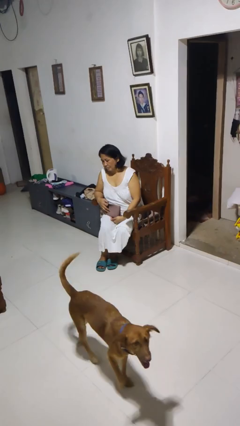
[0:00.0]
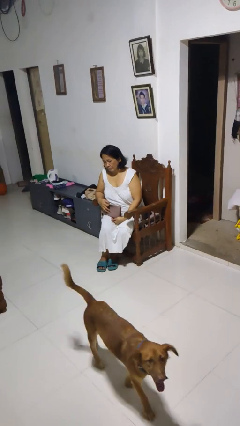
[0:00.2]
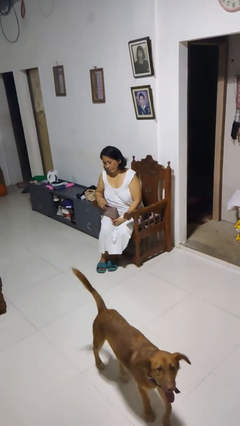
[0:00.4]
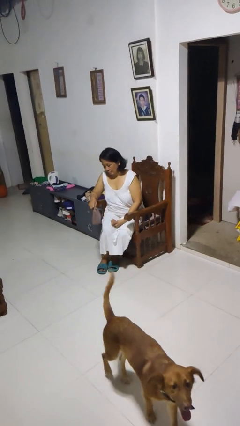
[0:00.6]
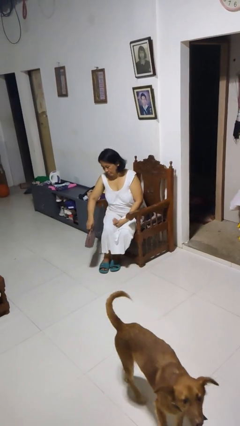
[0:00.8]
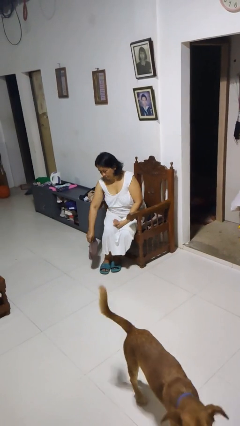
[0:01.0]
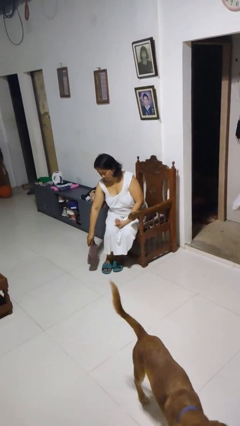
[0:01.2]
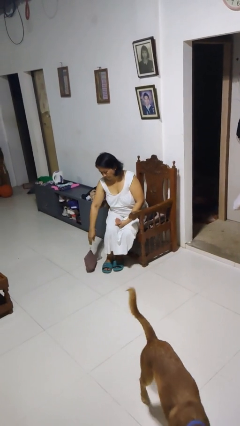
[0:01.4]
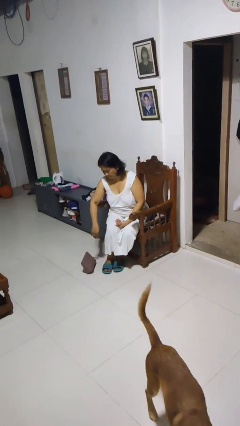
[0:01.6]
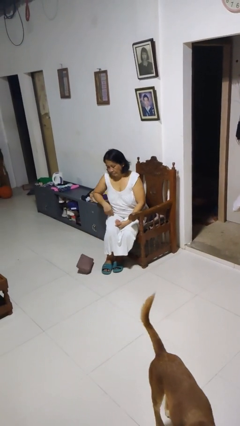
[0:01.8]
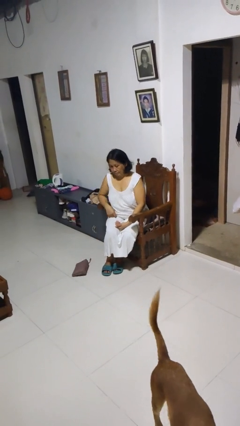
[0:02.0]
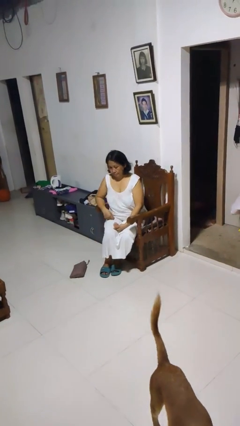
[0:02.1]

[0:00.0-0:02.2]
person drops object

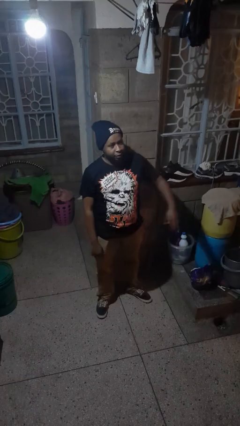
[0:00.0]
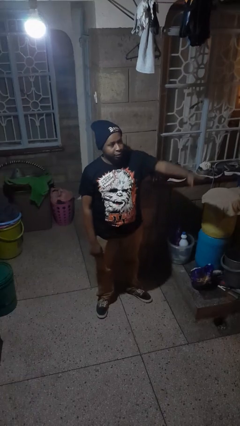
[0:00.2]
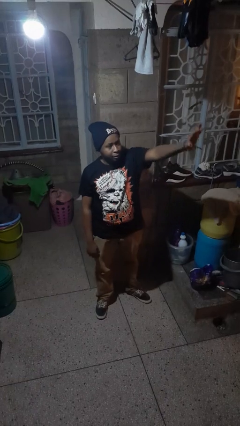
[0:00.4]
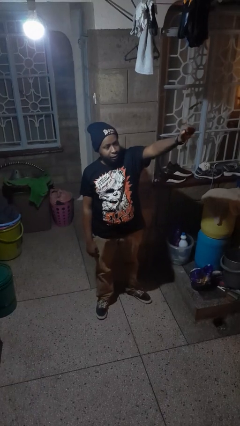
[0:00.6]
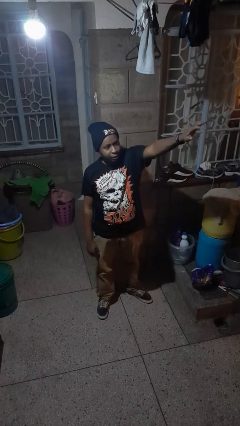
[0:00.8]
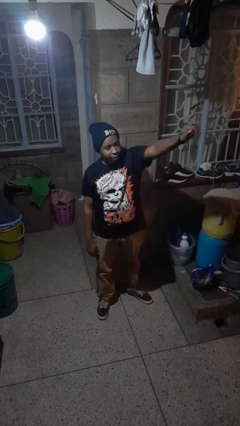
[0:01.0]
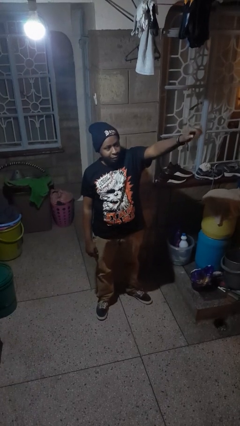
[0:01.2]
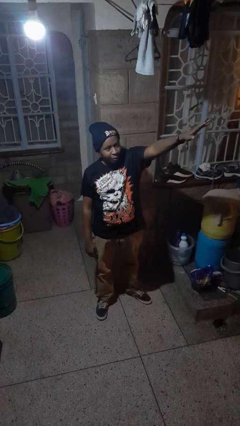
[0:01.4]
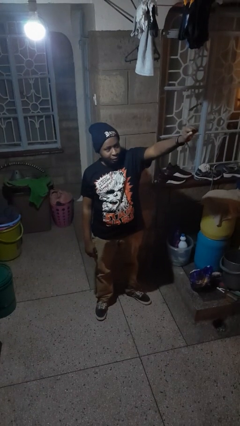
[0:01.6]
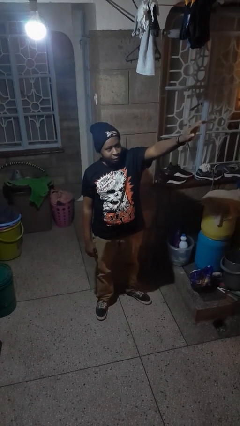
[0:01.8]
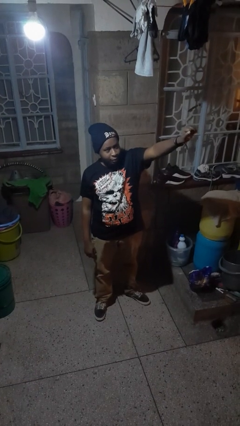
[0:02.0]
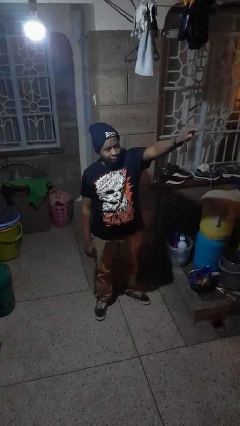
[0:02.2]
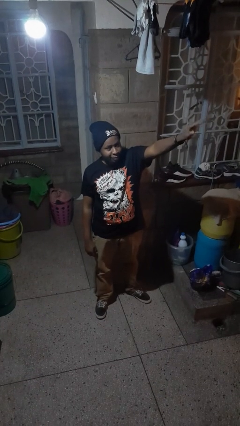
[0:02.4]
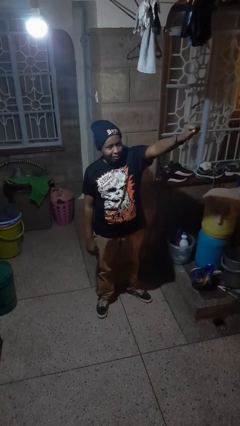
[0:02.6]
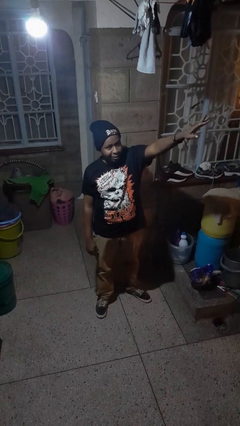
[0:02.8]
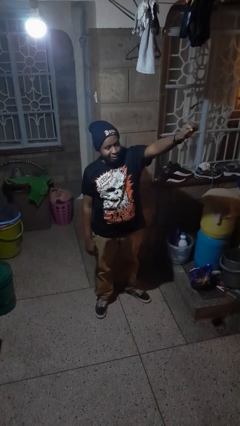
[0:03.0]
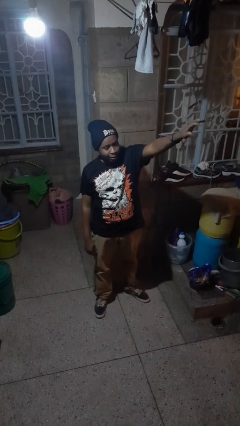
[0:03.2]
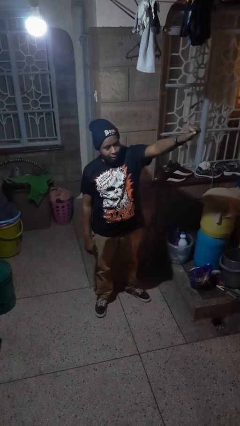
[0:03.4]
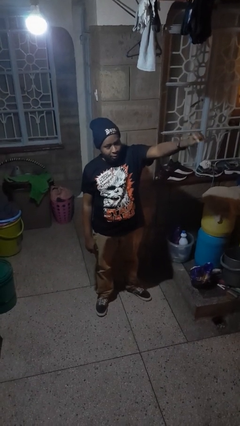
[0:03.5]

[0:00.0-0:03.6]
person gestures come here

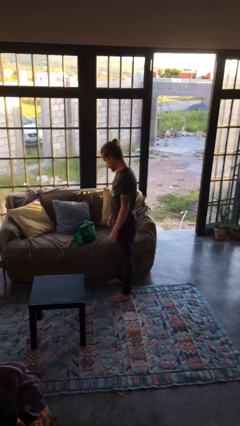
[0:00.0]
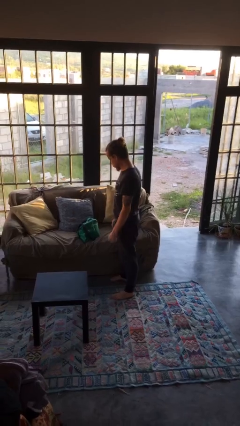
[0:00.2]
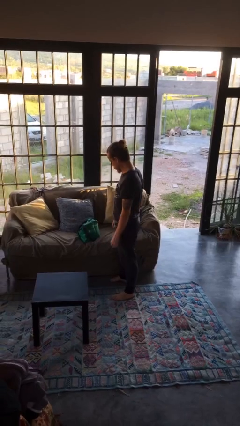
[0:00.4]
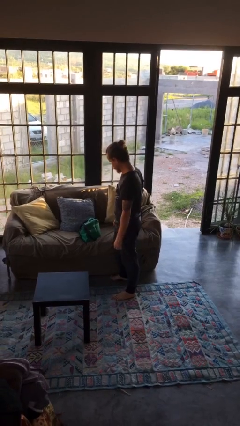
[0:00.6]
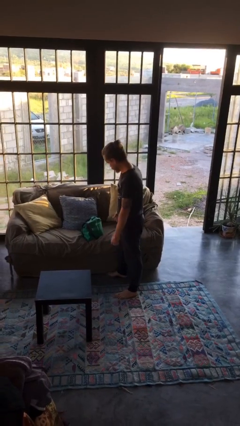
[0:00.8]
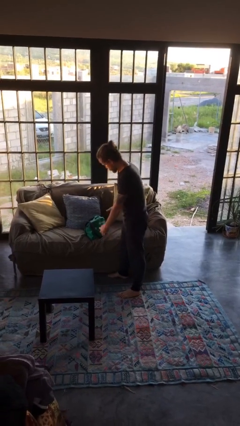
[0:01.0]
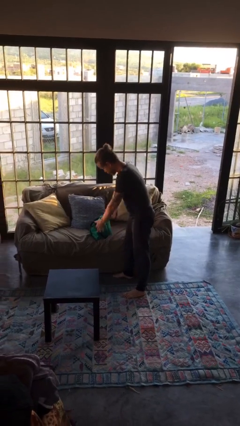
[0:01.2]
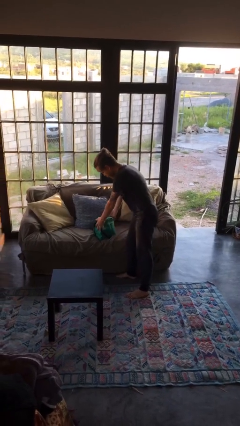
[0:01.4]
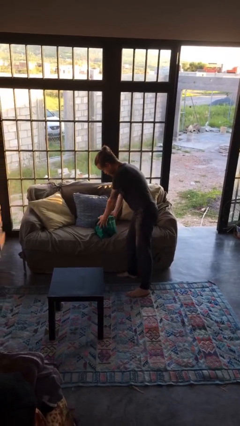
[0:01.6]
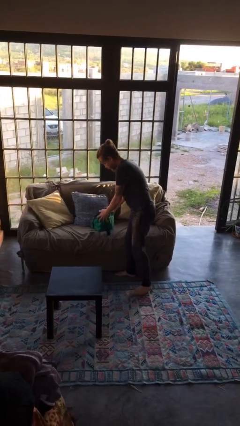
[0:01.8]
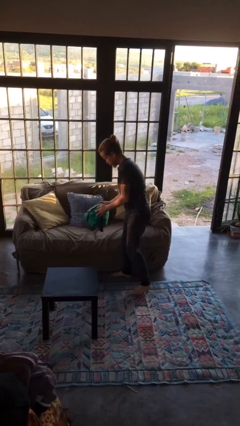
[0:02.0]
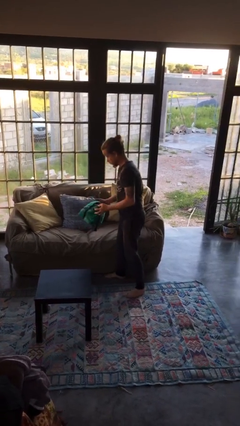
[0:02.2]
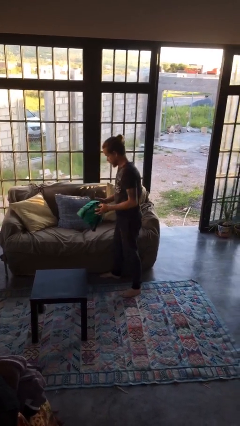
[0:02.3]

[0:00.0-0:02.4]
person picks up object from couch

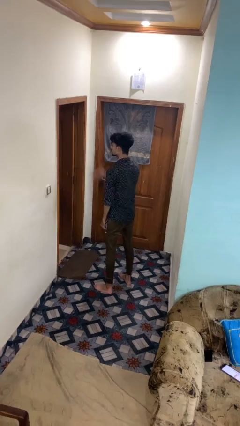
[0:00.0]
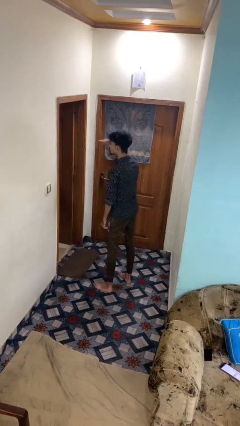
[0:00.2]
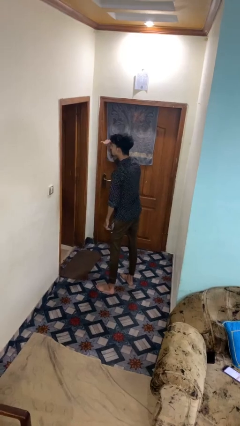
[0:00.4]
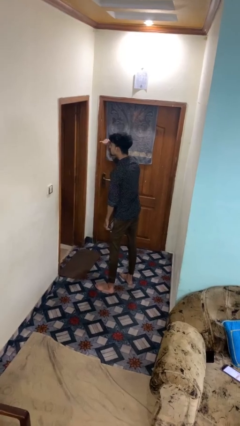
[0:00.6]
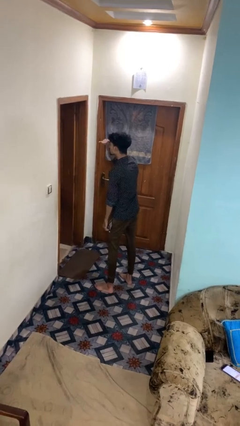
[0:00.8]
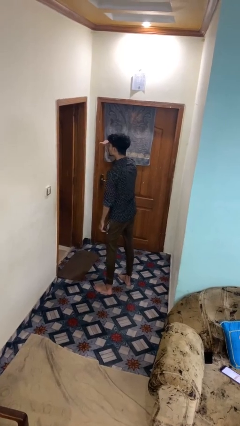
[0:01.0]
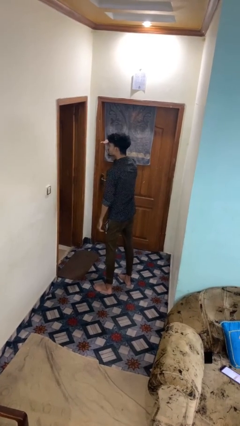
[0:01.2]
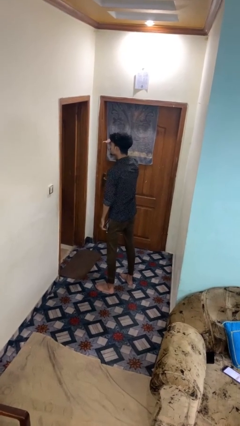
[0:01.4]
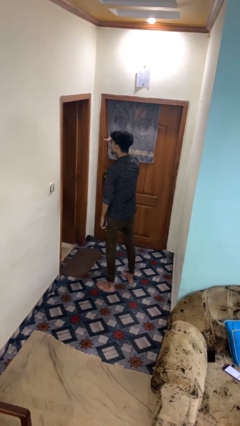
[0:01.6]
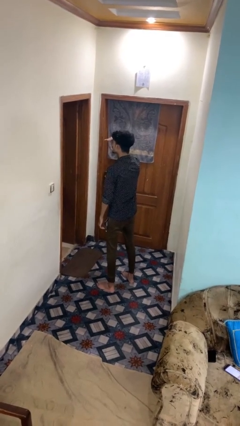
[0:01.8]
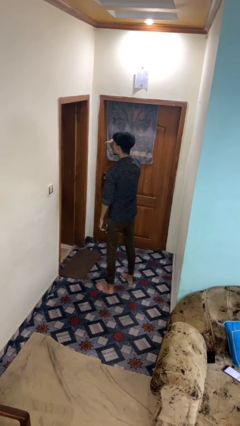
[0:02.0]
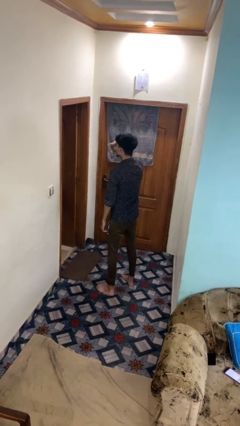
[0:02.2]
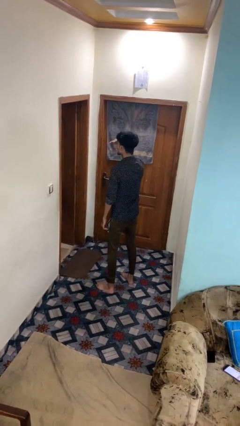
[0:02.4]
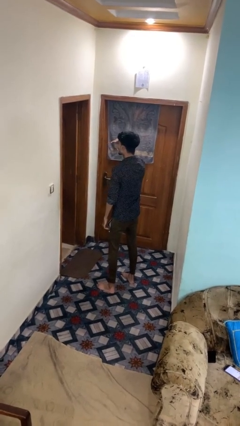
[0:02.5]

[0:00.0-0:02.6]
person shades eyes

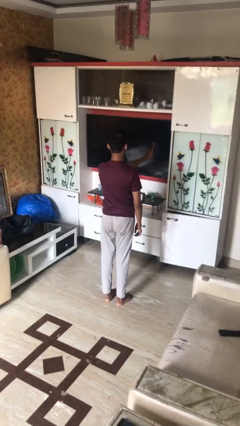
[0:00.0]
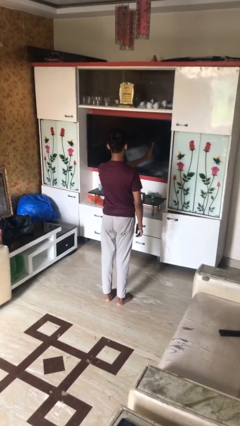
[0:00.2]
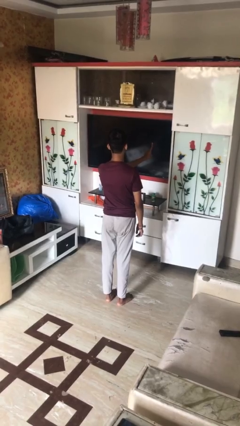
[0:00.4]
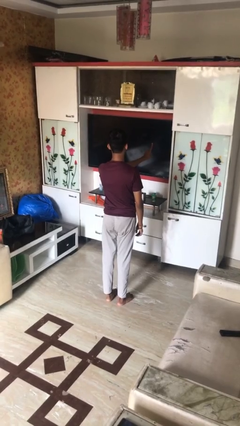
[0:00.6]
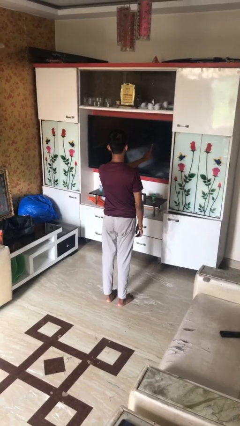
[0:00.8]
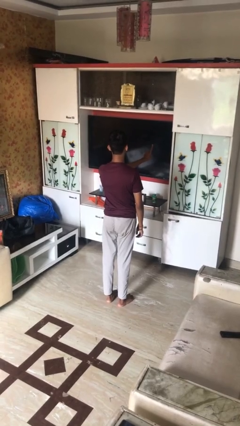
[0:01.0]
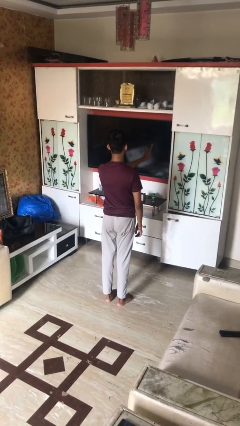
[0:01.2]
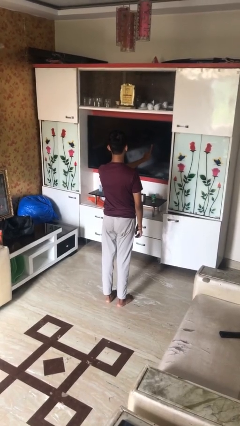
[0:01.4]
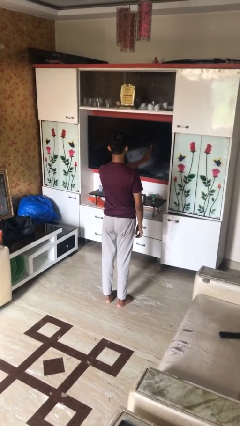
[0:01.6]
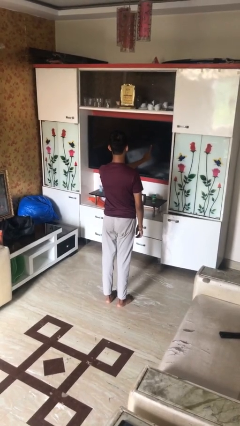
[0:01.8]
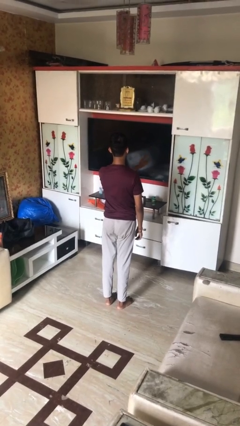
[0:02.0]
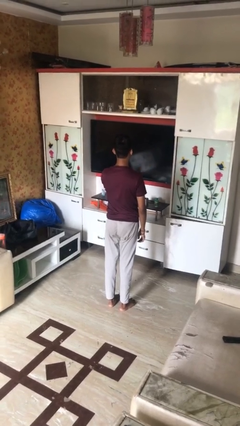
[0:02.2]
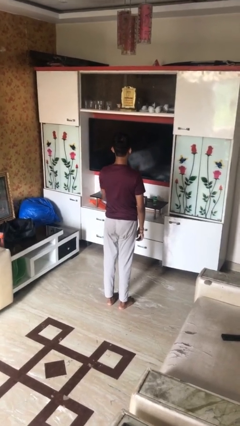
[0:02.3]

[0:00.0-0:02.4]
person gestures number one

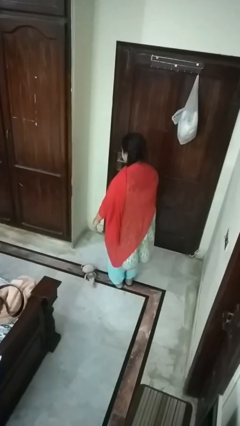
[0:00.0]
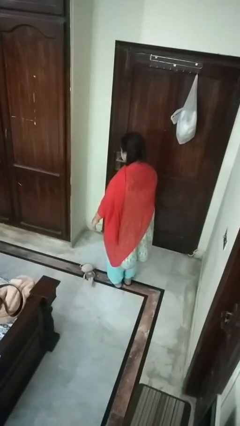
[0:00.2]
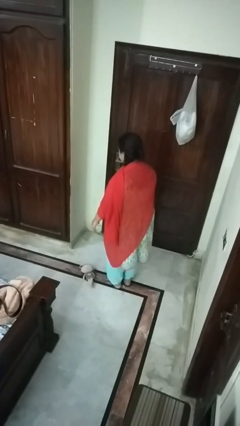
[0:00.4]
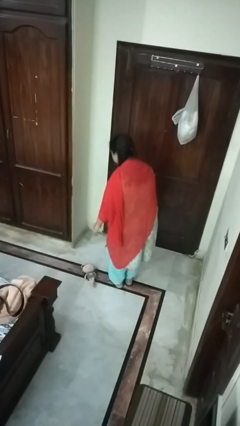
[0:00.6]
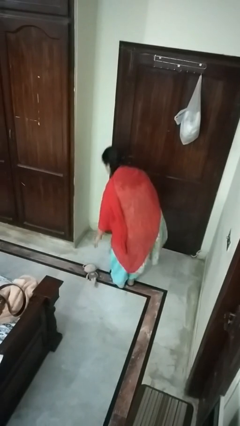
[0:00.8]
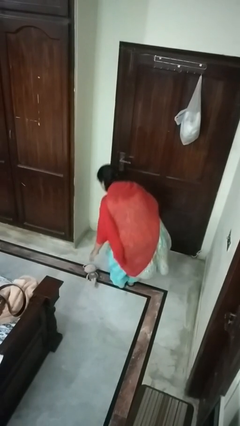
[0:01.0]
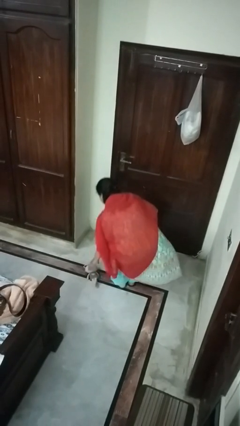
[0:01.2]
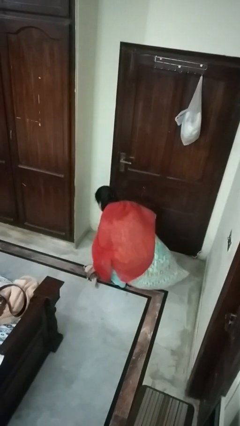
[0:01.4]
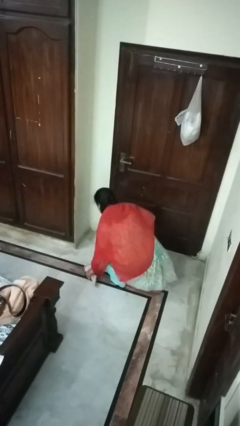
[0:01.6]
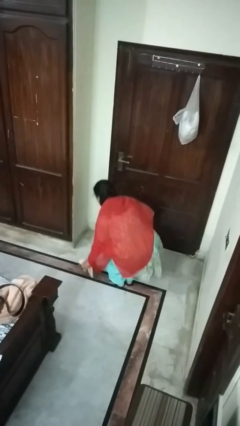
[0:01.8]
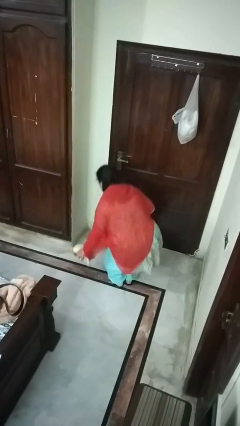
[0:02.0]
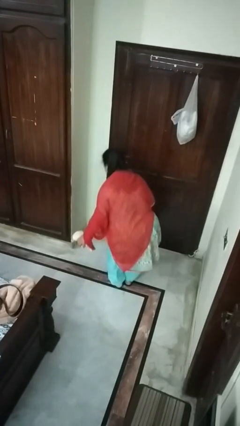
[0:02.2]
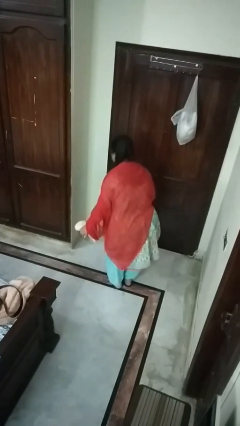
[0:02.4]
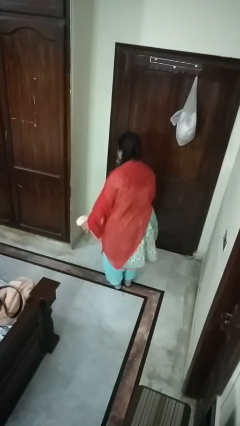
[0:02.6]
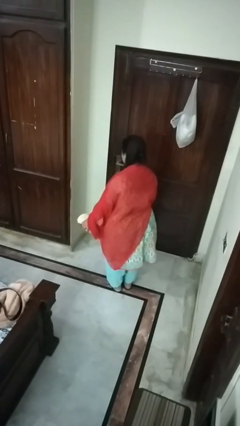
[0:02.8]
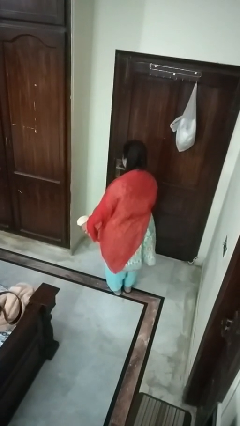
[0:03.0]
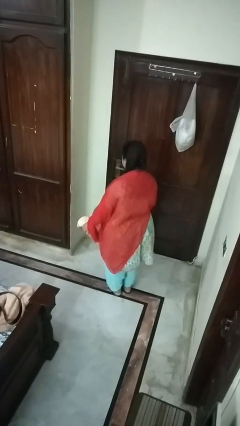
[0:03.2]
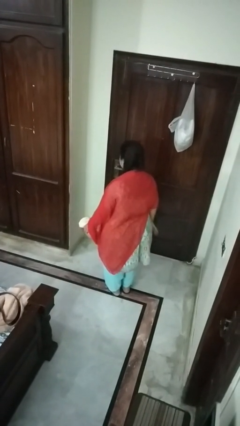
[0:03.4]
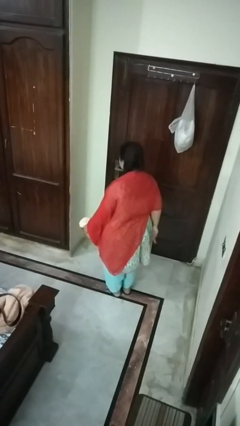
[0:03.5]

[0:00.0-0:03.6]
person picks up object from floor

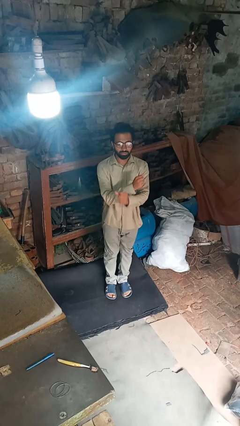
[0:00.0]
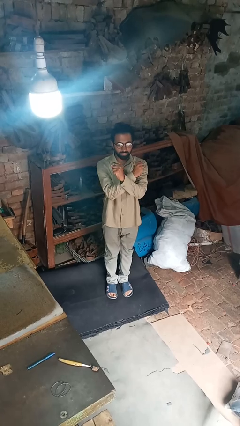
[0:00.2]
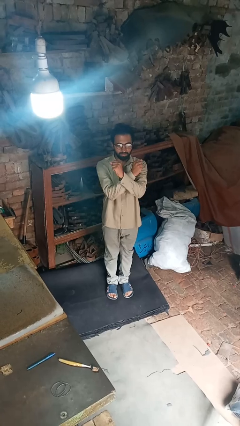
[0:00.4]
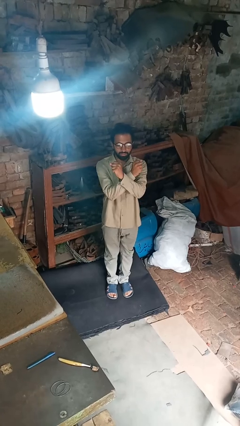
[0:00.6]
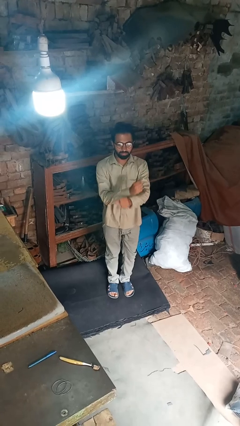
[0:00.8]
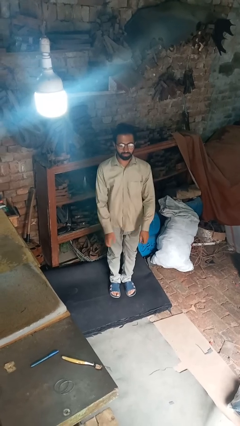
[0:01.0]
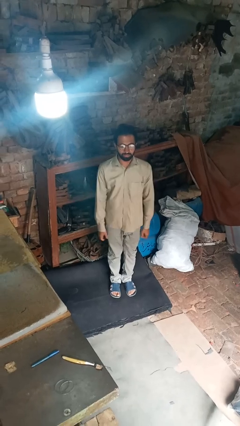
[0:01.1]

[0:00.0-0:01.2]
person karate chop
